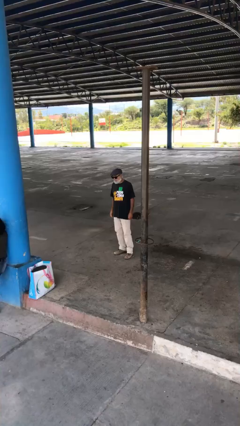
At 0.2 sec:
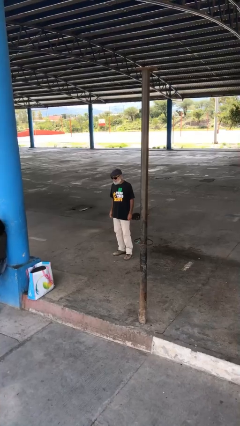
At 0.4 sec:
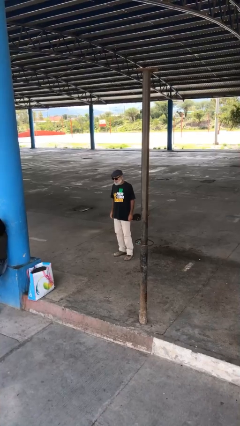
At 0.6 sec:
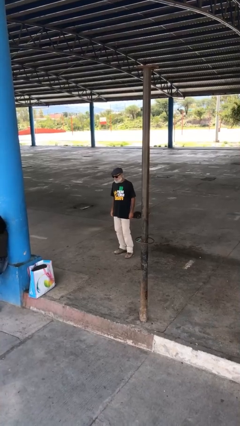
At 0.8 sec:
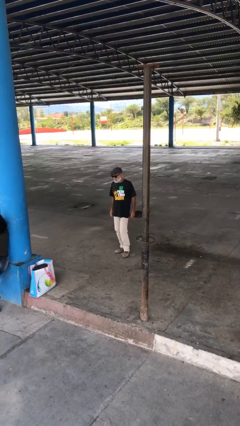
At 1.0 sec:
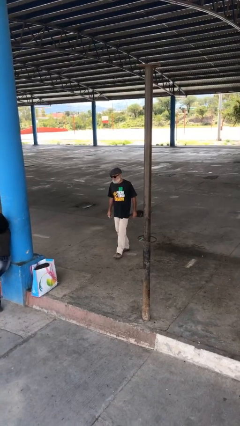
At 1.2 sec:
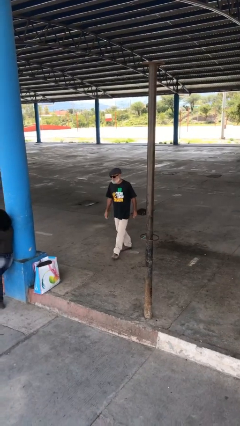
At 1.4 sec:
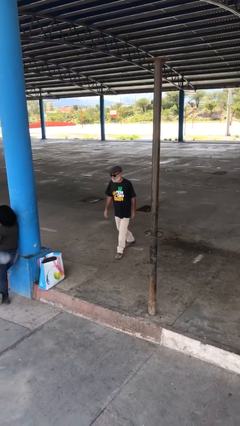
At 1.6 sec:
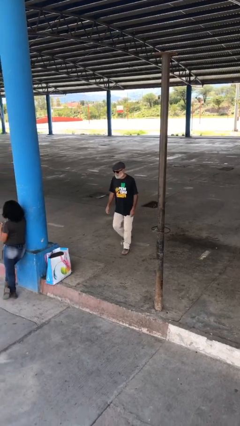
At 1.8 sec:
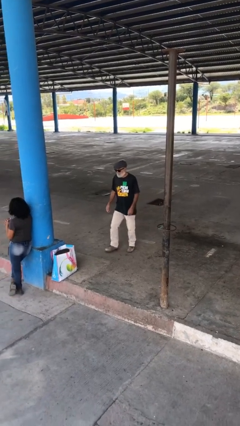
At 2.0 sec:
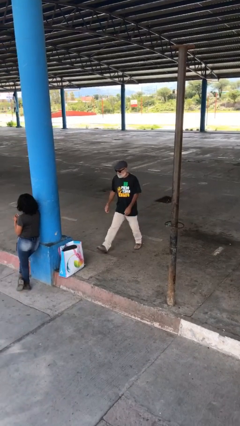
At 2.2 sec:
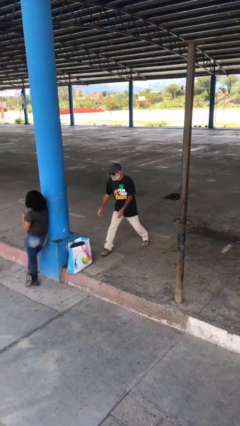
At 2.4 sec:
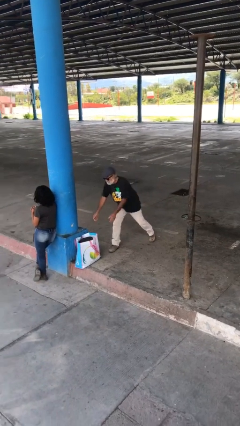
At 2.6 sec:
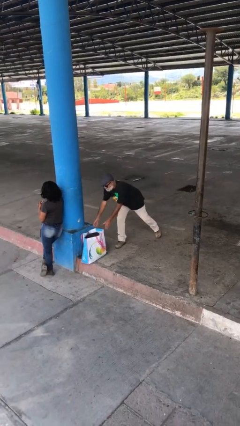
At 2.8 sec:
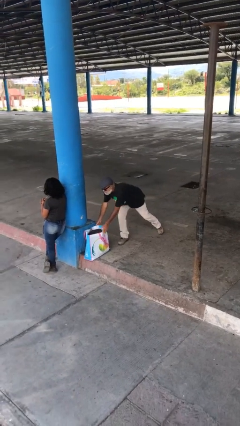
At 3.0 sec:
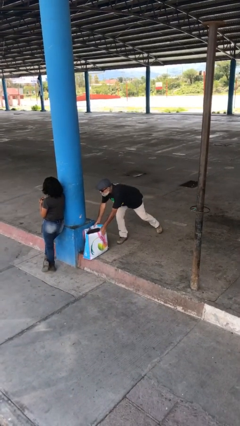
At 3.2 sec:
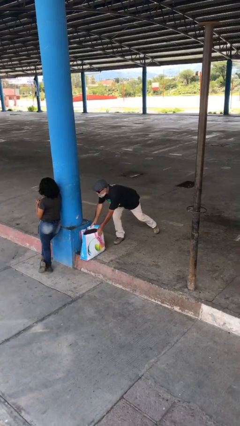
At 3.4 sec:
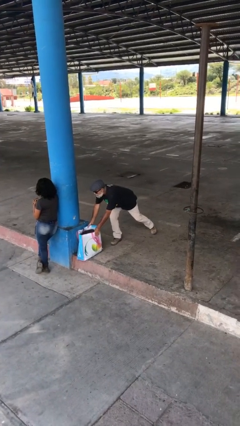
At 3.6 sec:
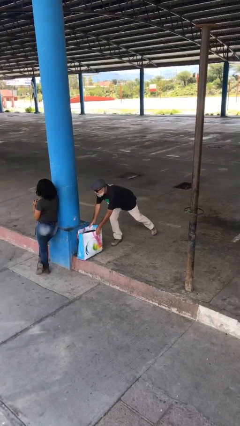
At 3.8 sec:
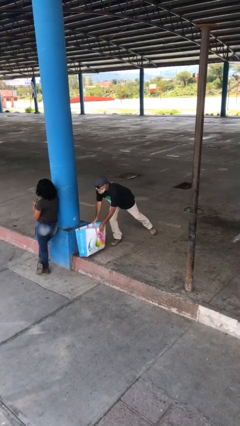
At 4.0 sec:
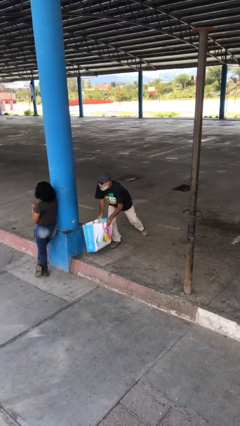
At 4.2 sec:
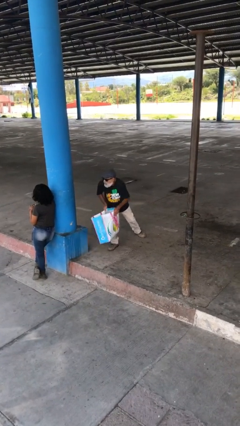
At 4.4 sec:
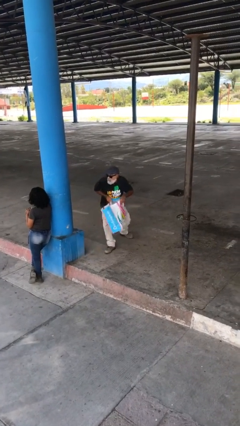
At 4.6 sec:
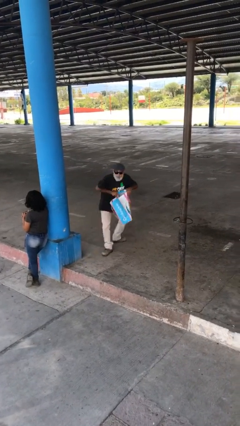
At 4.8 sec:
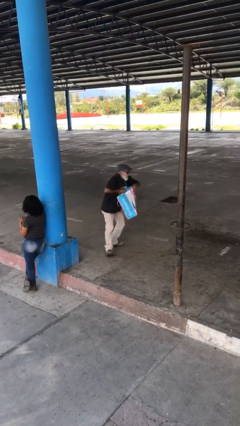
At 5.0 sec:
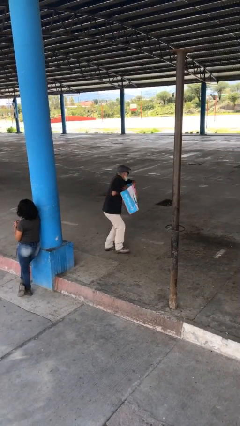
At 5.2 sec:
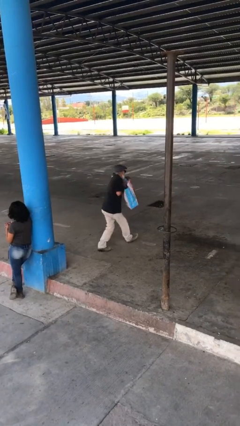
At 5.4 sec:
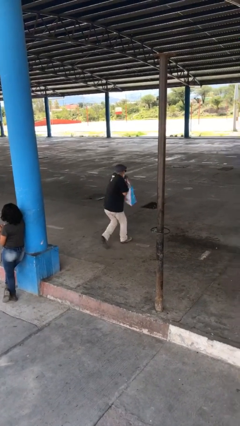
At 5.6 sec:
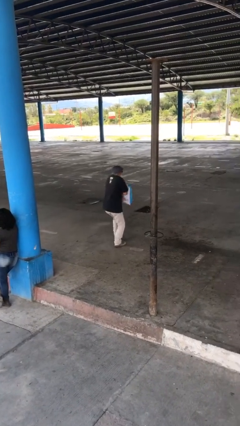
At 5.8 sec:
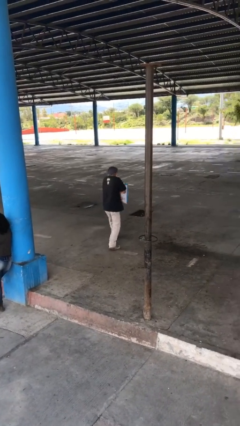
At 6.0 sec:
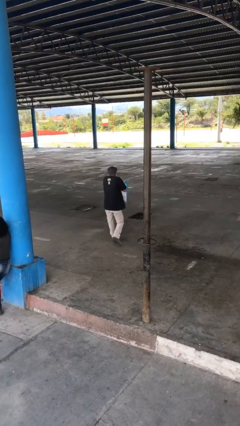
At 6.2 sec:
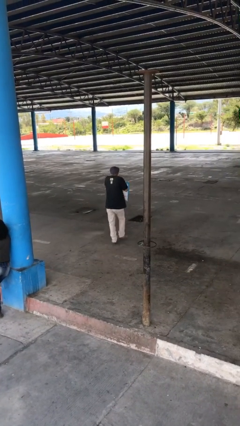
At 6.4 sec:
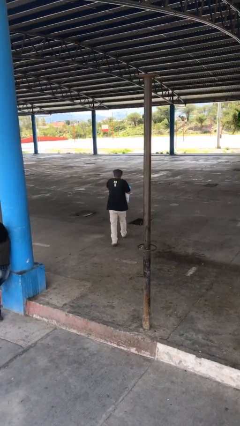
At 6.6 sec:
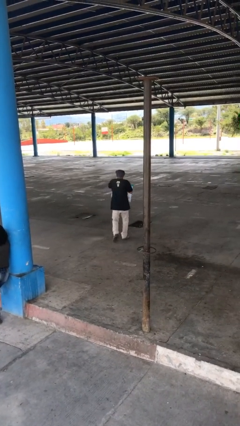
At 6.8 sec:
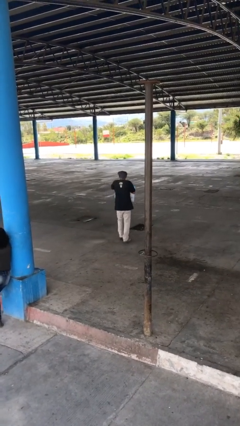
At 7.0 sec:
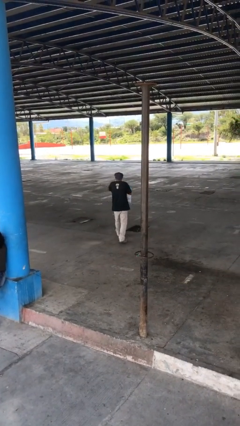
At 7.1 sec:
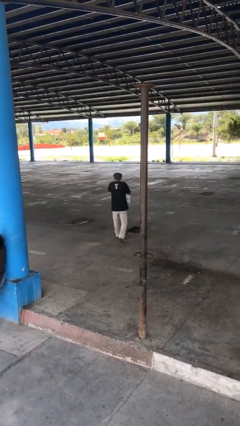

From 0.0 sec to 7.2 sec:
person steals object from person

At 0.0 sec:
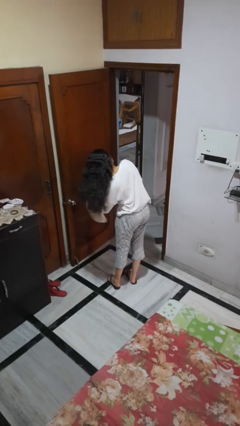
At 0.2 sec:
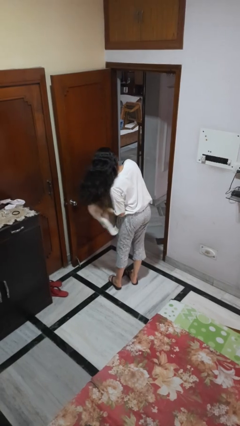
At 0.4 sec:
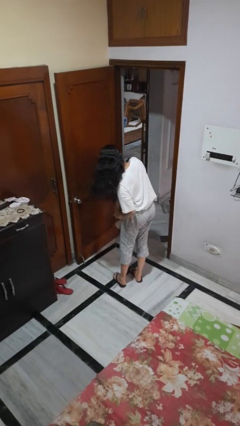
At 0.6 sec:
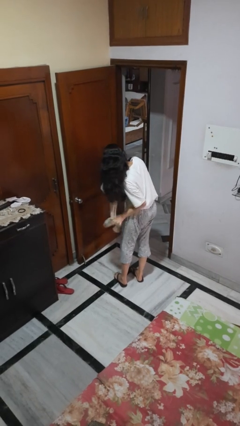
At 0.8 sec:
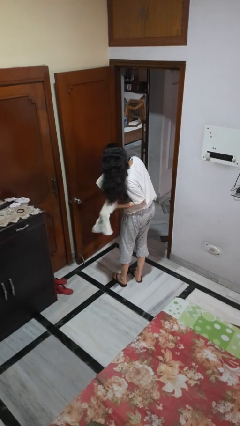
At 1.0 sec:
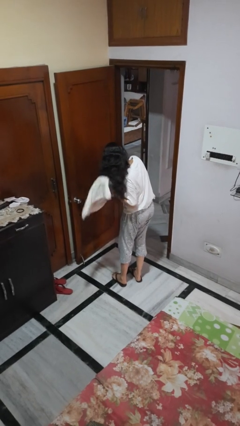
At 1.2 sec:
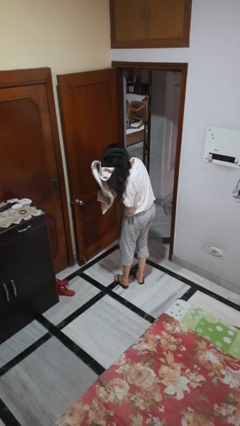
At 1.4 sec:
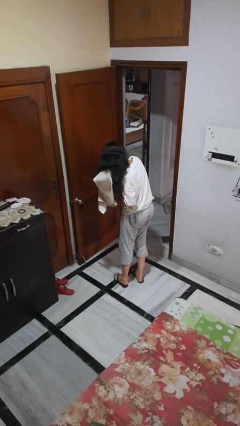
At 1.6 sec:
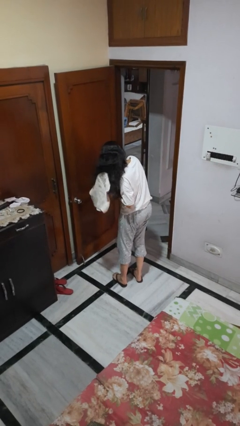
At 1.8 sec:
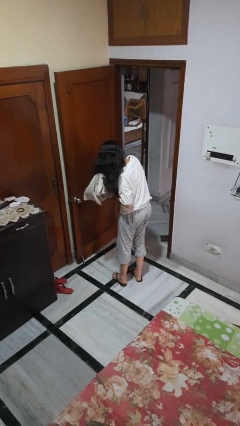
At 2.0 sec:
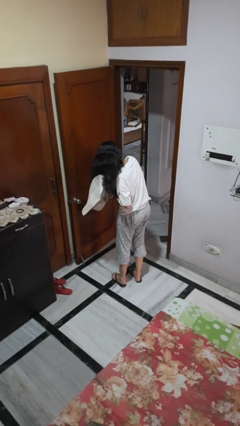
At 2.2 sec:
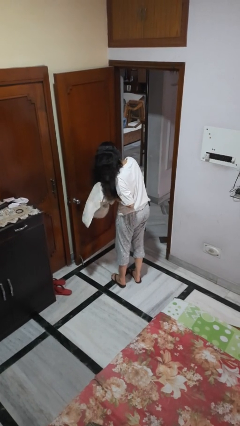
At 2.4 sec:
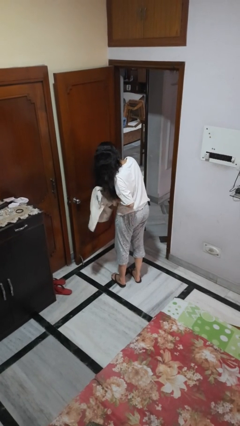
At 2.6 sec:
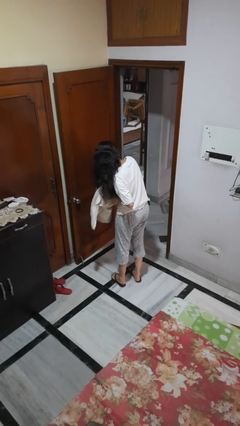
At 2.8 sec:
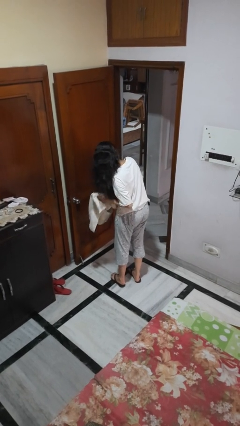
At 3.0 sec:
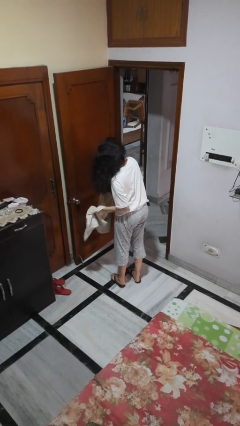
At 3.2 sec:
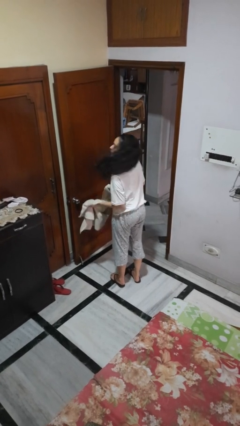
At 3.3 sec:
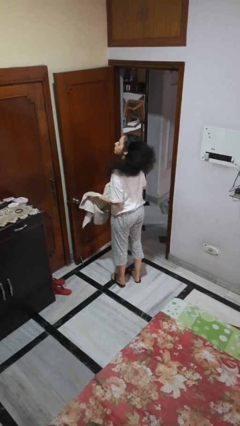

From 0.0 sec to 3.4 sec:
person dries hair with towel

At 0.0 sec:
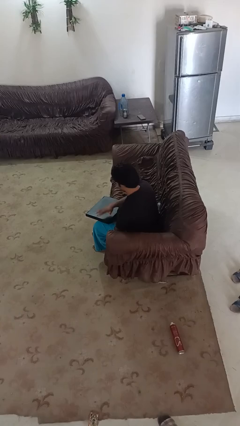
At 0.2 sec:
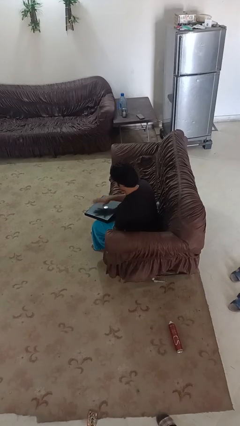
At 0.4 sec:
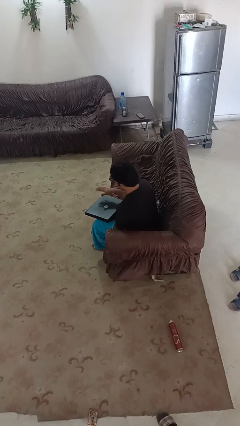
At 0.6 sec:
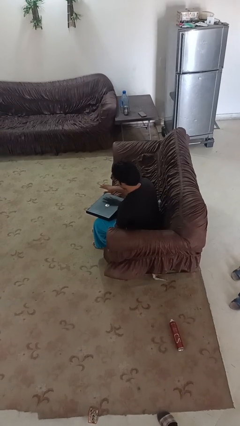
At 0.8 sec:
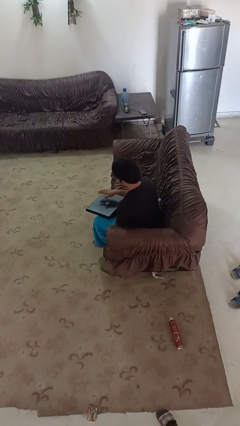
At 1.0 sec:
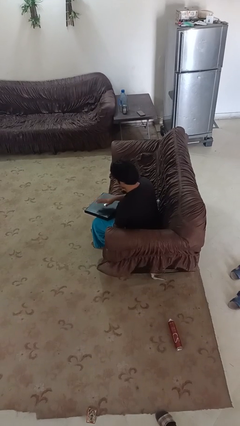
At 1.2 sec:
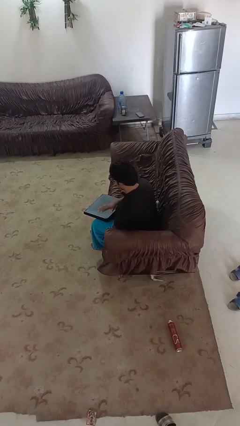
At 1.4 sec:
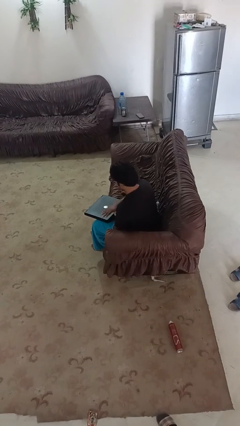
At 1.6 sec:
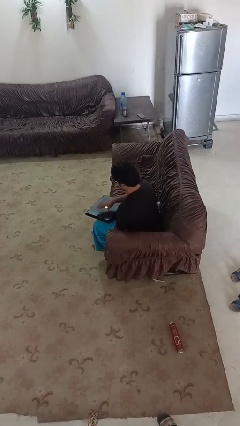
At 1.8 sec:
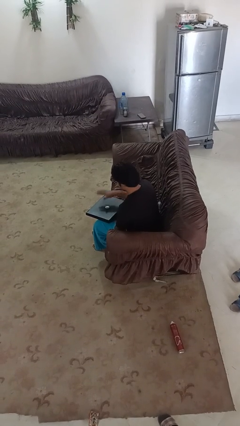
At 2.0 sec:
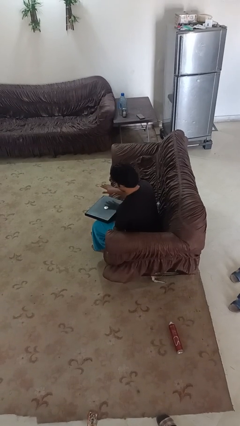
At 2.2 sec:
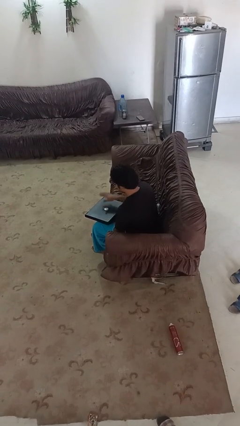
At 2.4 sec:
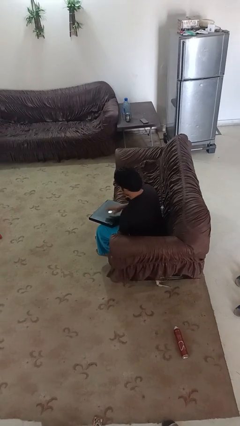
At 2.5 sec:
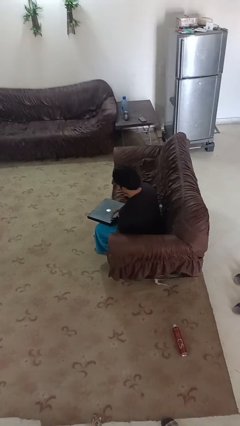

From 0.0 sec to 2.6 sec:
person waves hand over object

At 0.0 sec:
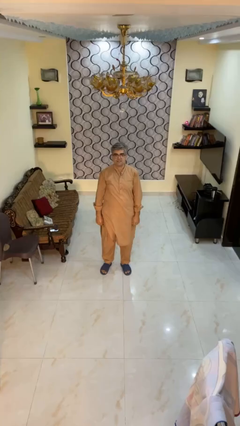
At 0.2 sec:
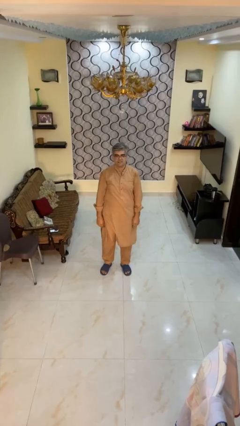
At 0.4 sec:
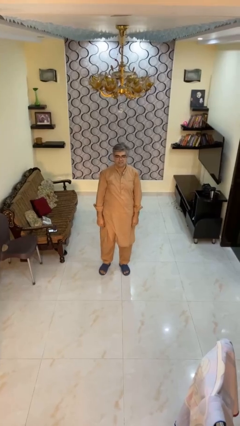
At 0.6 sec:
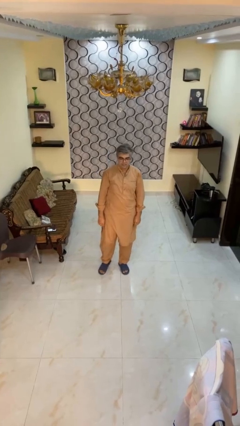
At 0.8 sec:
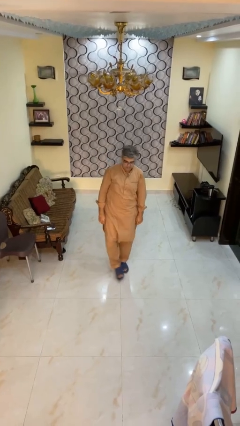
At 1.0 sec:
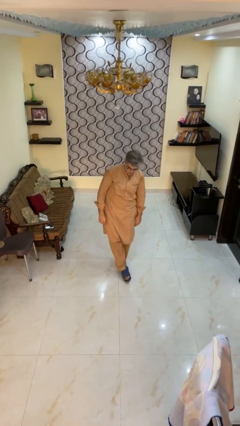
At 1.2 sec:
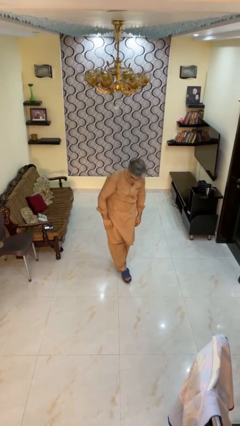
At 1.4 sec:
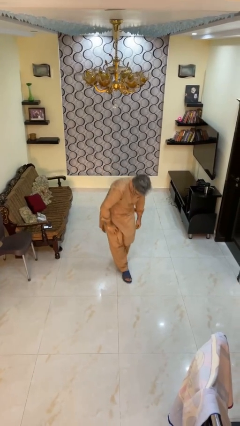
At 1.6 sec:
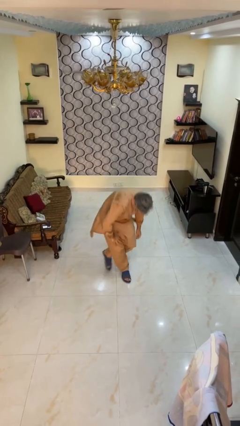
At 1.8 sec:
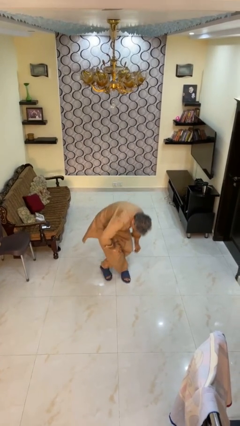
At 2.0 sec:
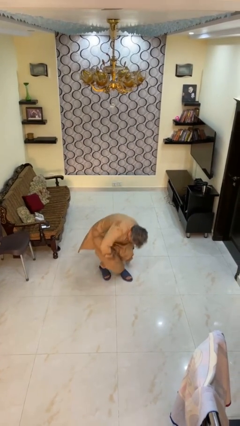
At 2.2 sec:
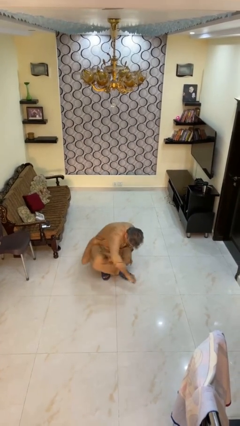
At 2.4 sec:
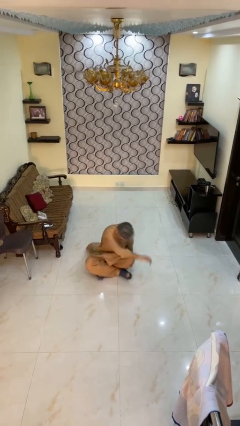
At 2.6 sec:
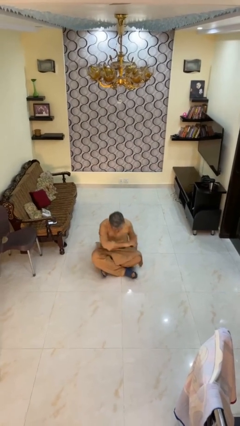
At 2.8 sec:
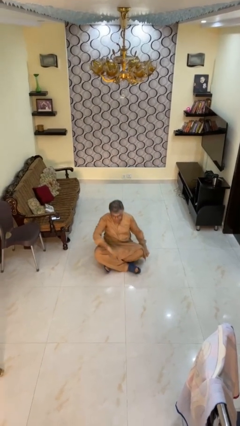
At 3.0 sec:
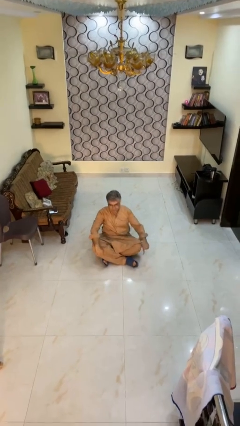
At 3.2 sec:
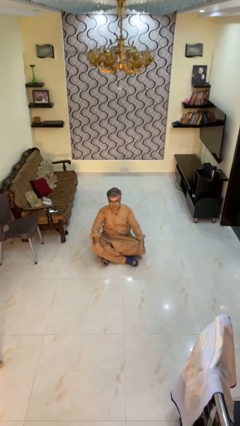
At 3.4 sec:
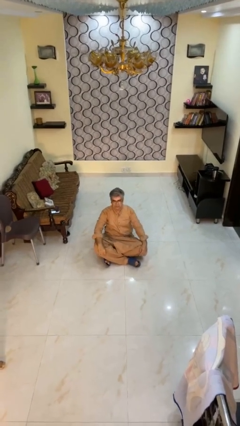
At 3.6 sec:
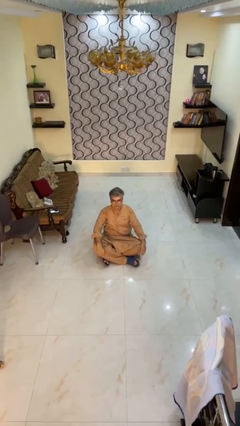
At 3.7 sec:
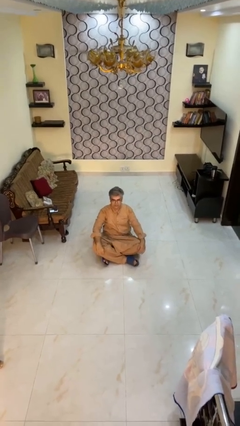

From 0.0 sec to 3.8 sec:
person sits crisscross

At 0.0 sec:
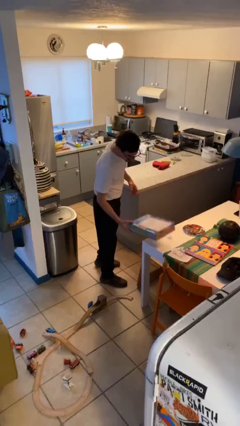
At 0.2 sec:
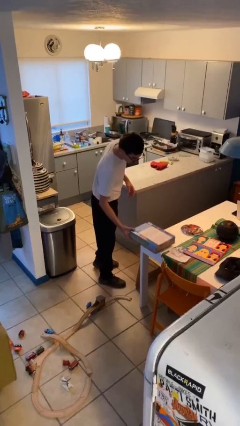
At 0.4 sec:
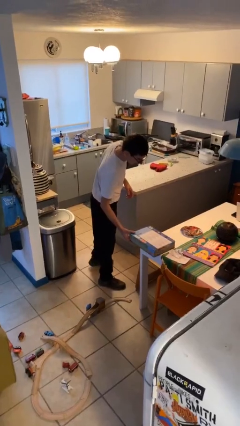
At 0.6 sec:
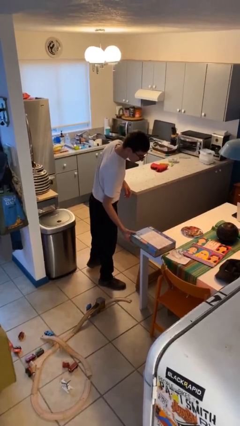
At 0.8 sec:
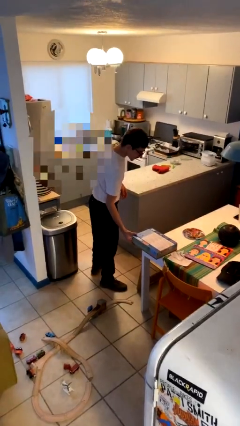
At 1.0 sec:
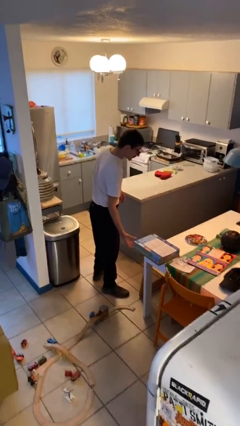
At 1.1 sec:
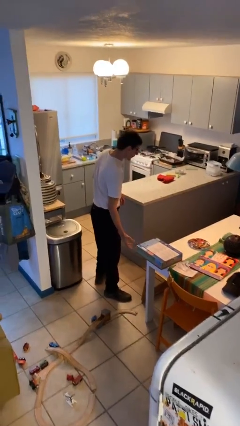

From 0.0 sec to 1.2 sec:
person puts down object on table
